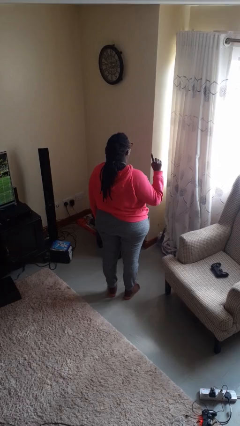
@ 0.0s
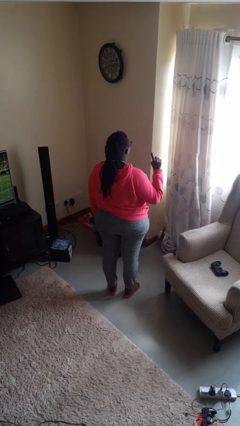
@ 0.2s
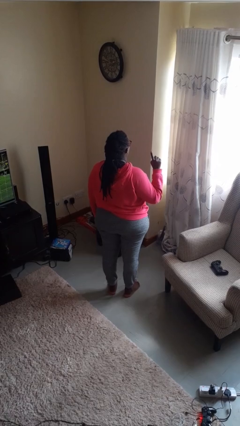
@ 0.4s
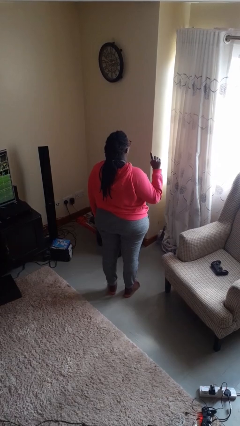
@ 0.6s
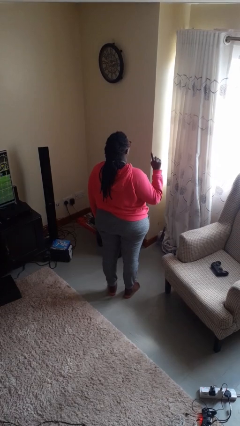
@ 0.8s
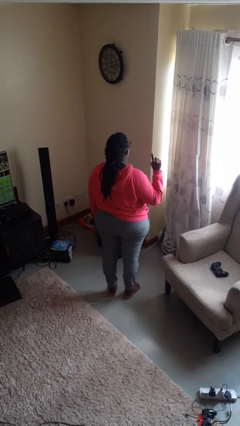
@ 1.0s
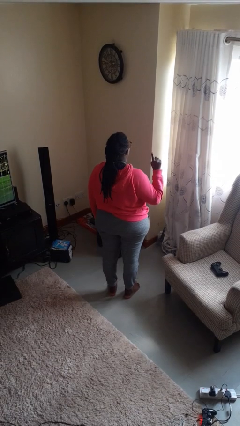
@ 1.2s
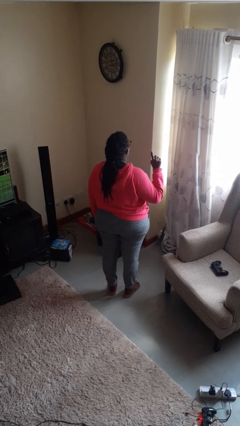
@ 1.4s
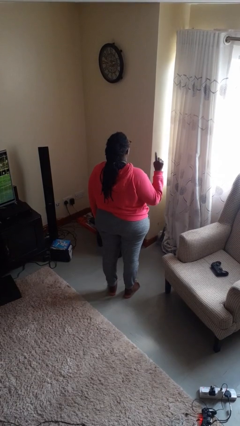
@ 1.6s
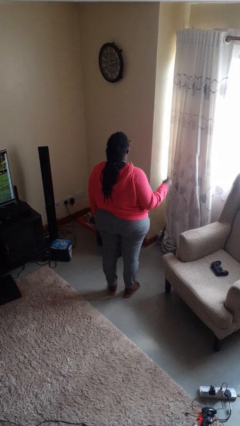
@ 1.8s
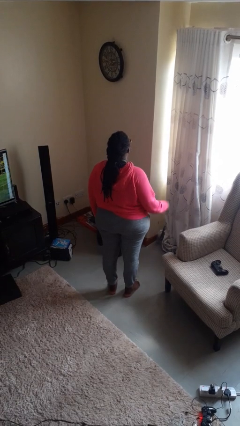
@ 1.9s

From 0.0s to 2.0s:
person gestures number one

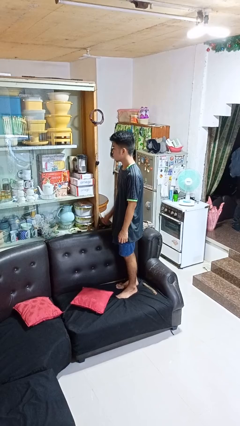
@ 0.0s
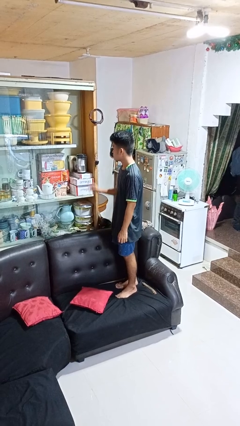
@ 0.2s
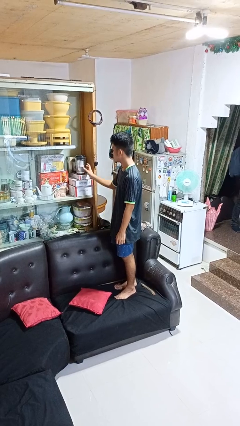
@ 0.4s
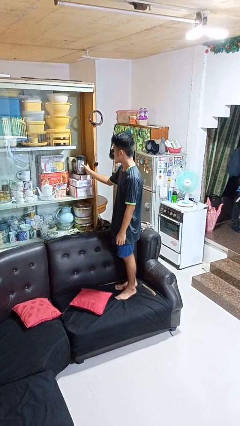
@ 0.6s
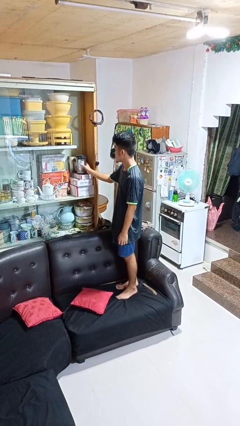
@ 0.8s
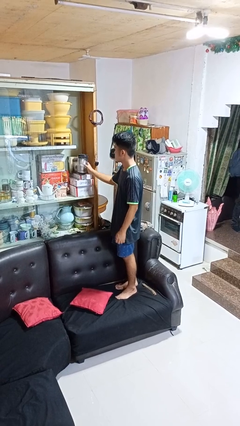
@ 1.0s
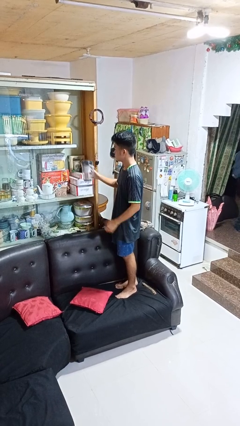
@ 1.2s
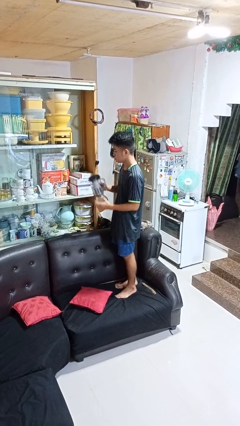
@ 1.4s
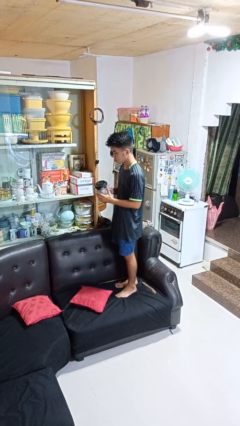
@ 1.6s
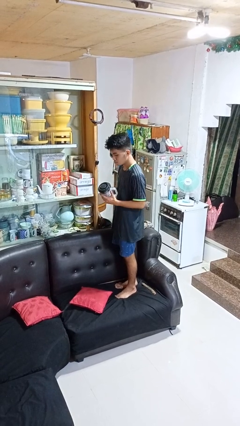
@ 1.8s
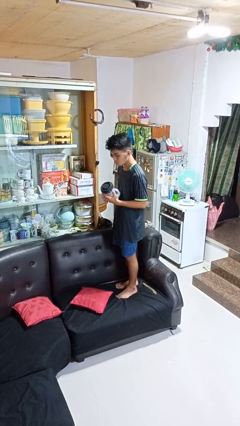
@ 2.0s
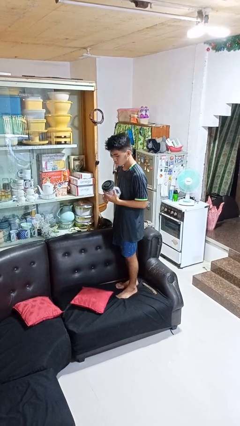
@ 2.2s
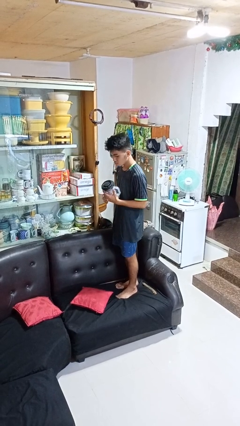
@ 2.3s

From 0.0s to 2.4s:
person picks up object from cabinet

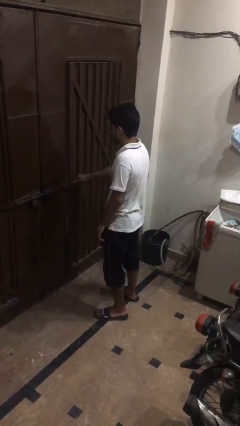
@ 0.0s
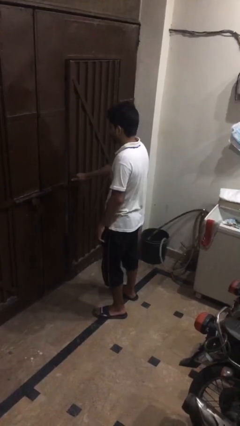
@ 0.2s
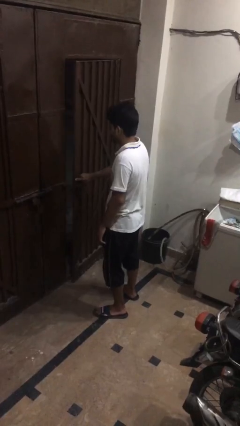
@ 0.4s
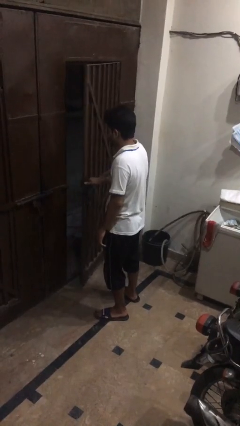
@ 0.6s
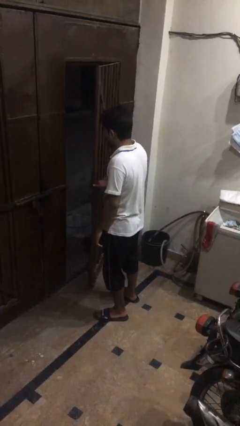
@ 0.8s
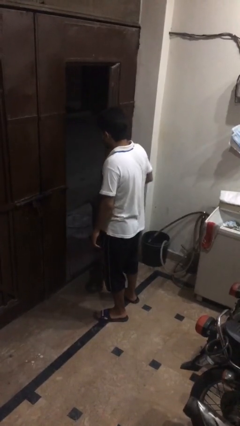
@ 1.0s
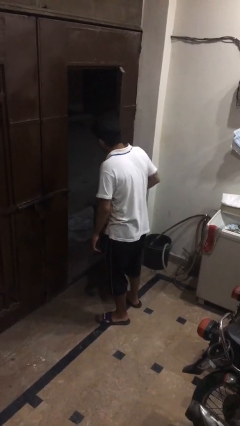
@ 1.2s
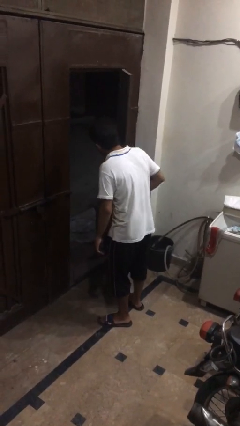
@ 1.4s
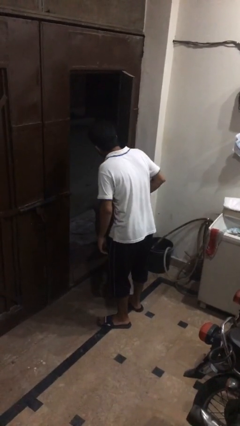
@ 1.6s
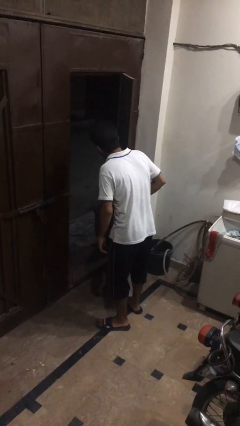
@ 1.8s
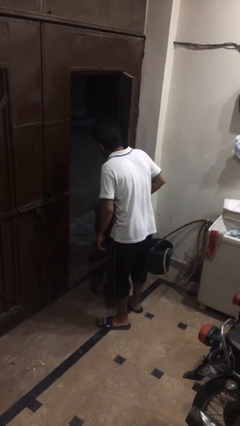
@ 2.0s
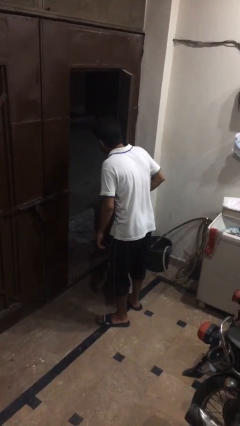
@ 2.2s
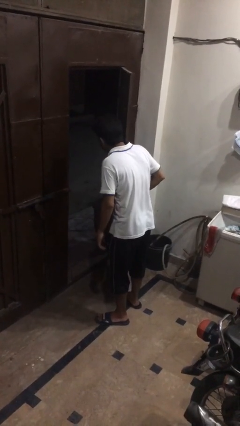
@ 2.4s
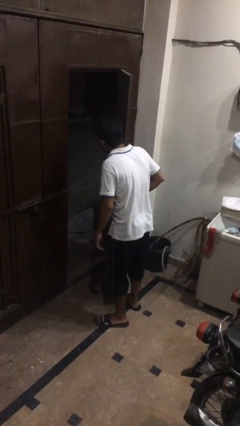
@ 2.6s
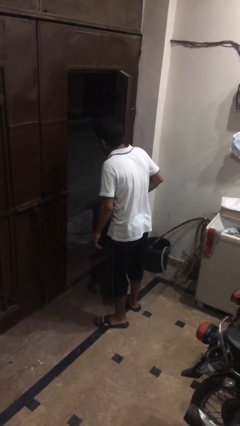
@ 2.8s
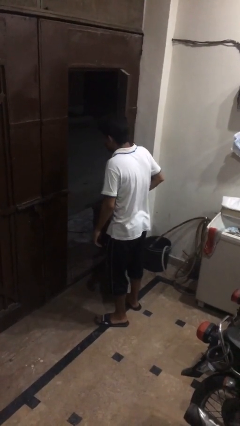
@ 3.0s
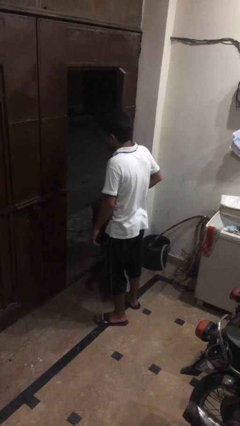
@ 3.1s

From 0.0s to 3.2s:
person opens gate

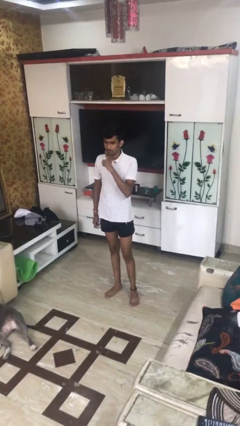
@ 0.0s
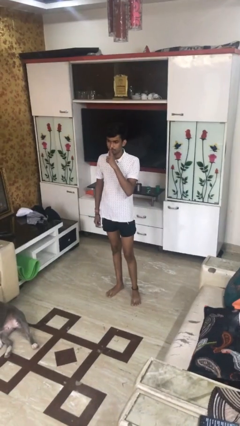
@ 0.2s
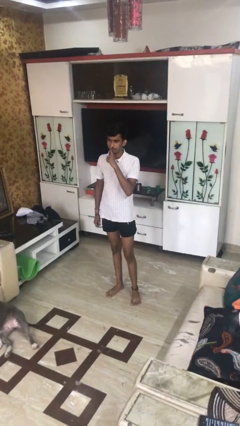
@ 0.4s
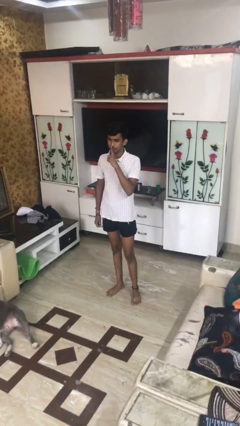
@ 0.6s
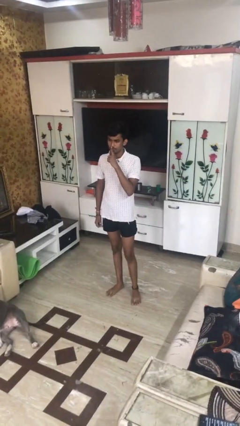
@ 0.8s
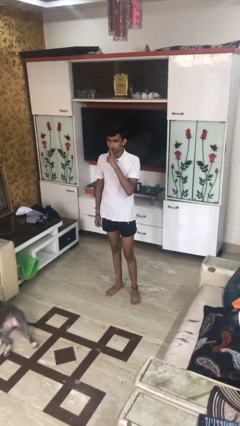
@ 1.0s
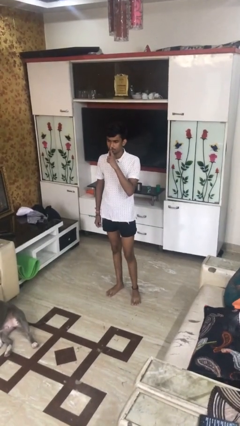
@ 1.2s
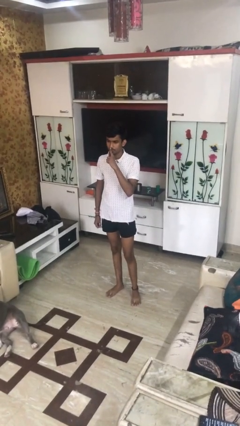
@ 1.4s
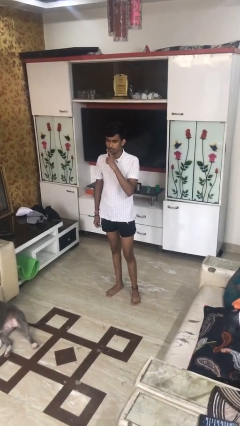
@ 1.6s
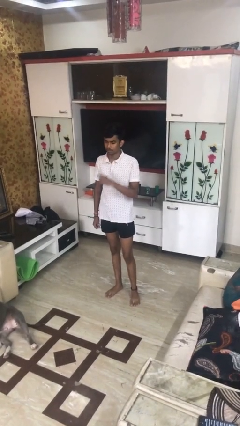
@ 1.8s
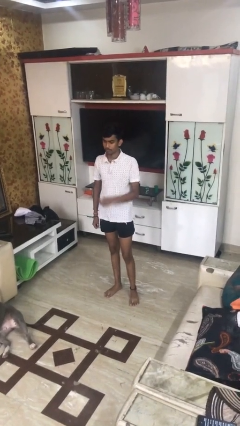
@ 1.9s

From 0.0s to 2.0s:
person gestures be quiet

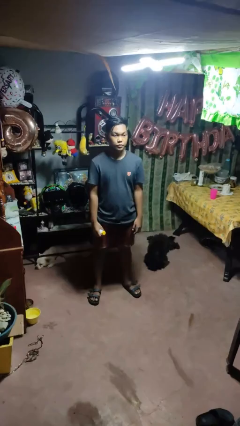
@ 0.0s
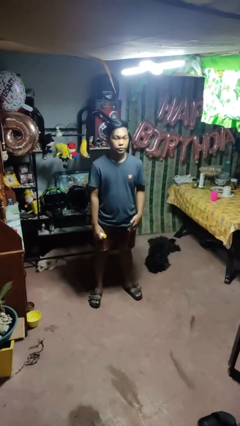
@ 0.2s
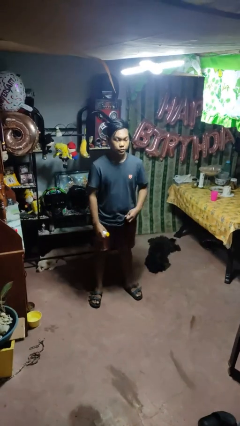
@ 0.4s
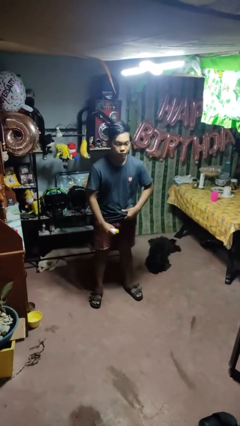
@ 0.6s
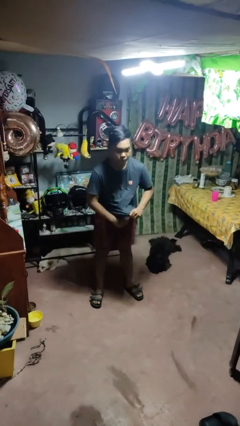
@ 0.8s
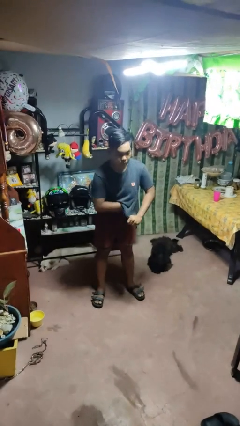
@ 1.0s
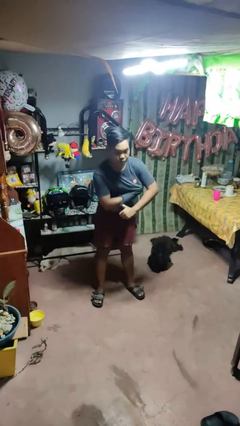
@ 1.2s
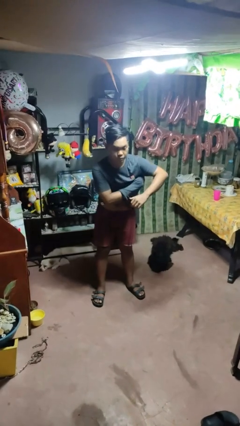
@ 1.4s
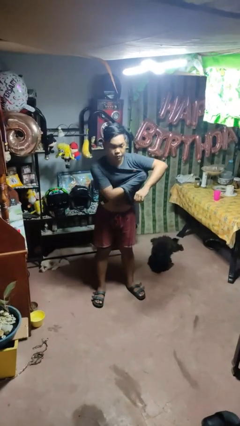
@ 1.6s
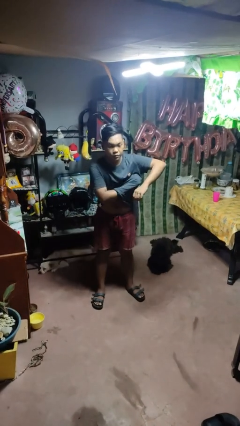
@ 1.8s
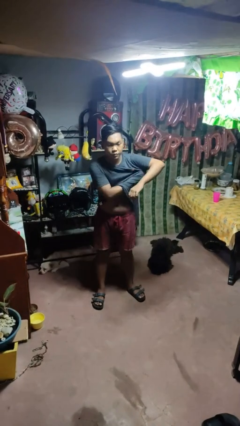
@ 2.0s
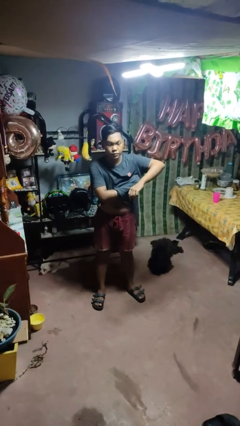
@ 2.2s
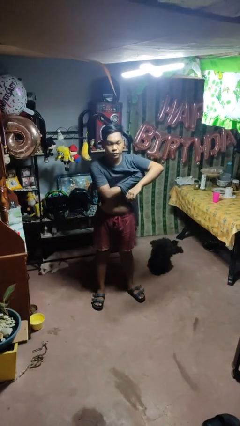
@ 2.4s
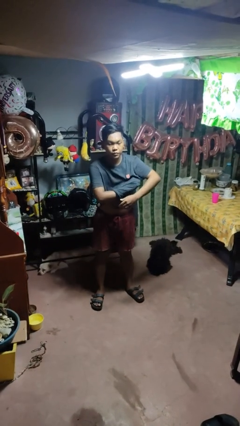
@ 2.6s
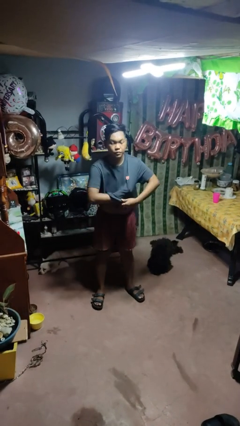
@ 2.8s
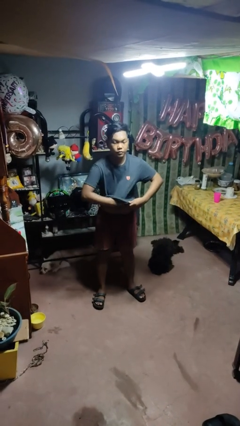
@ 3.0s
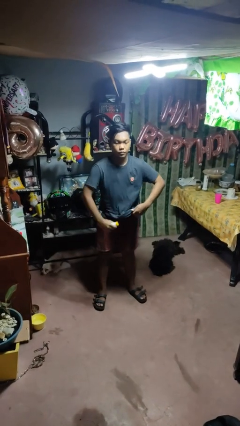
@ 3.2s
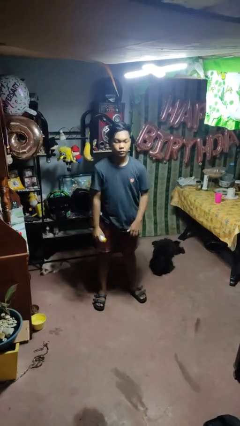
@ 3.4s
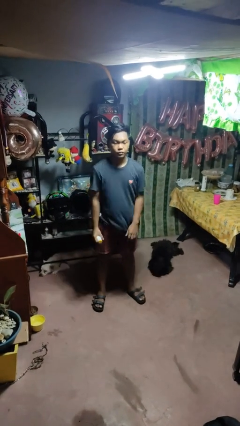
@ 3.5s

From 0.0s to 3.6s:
person applies deodorant

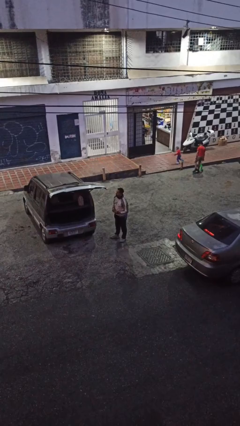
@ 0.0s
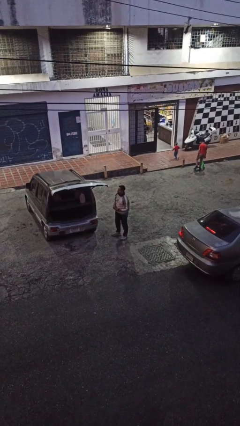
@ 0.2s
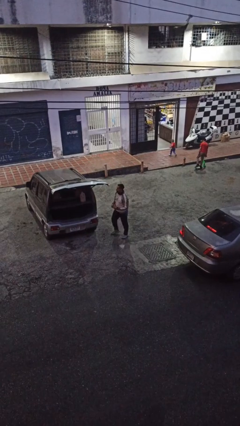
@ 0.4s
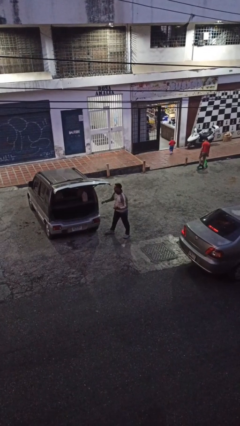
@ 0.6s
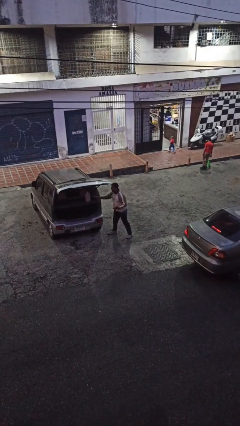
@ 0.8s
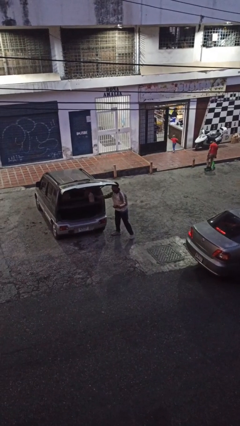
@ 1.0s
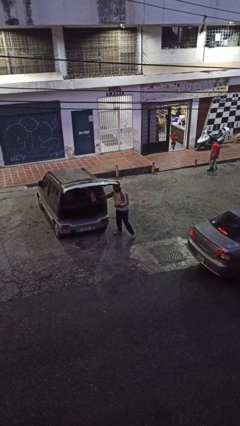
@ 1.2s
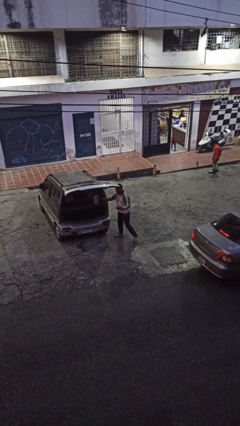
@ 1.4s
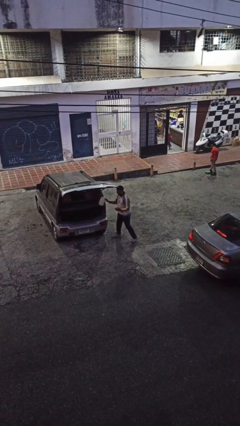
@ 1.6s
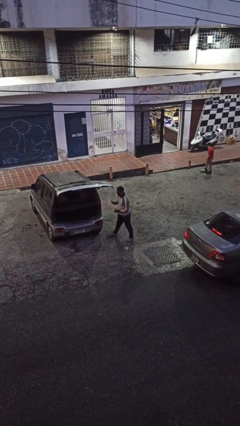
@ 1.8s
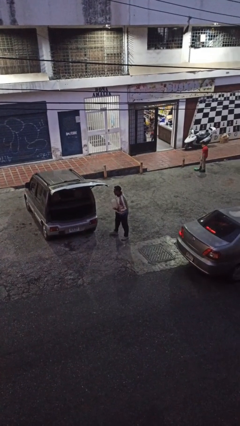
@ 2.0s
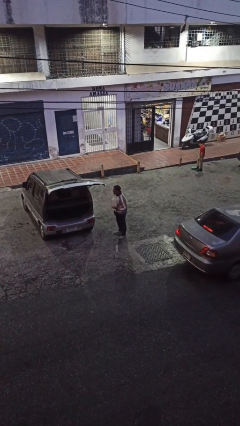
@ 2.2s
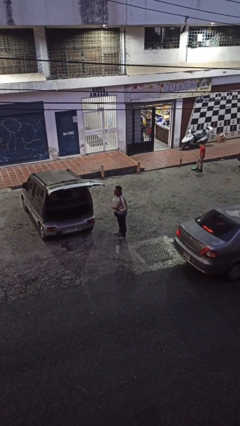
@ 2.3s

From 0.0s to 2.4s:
person unloads car

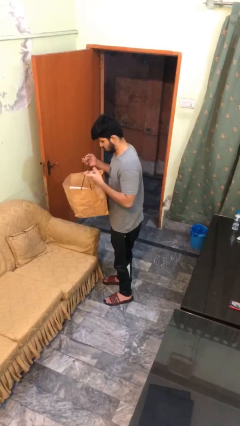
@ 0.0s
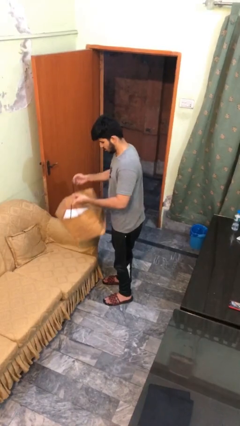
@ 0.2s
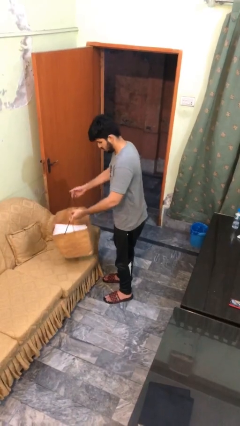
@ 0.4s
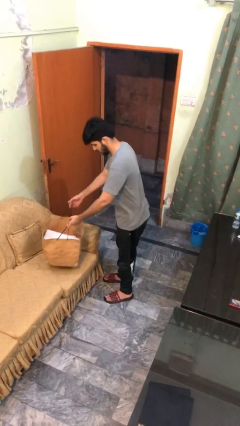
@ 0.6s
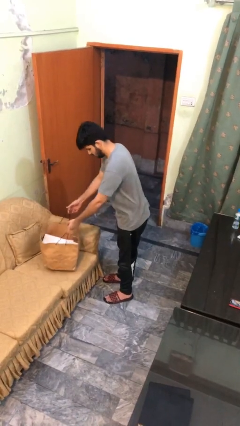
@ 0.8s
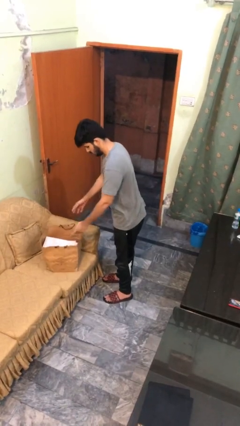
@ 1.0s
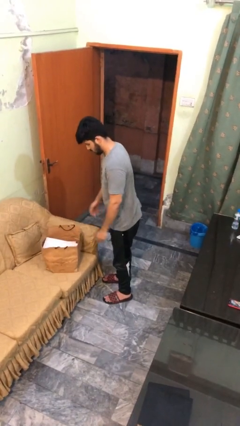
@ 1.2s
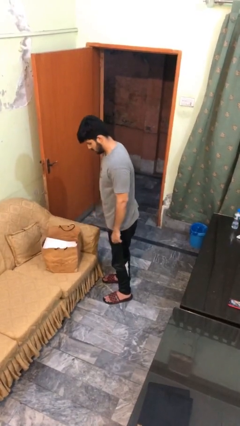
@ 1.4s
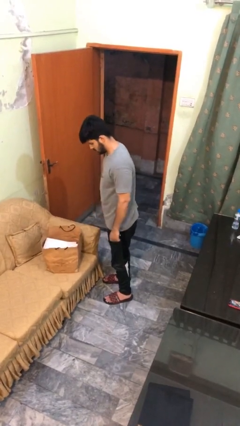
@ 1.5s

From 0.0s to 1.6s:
person puts down object on couch
